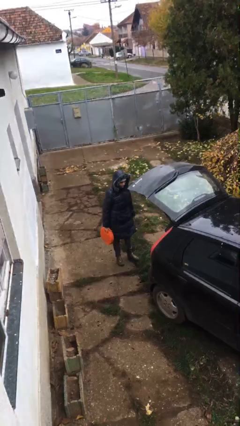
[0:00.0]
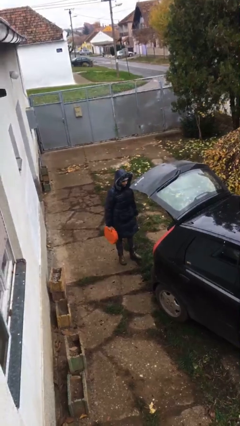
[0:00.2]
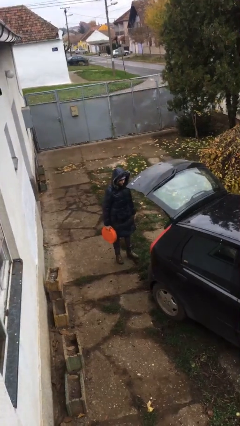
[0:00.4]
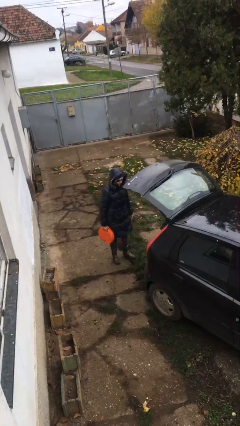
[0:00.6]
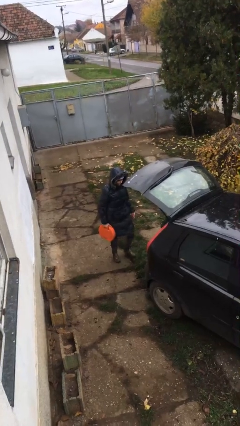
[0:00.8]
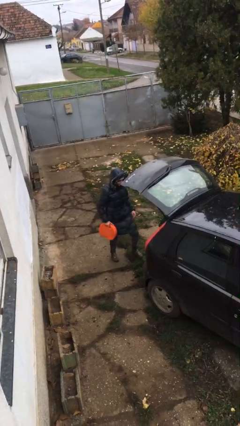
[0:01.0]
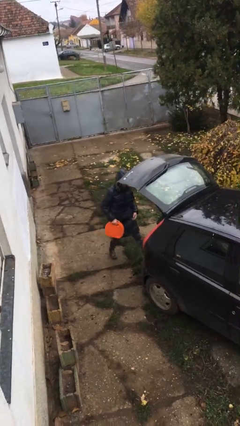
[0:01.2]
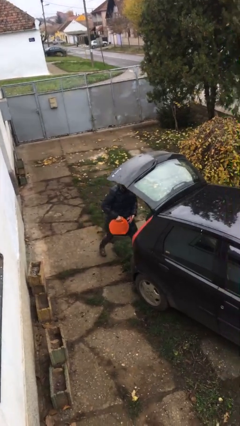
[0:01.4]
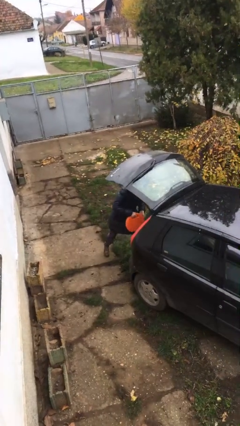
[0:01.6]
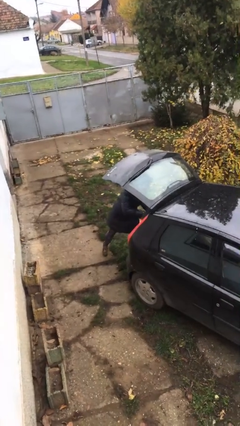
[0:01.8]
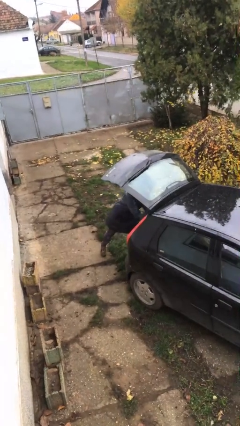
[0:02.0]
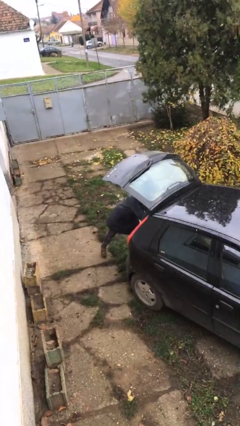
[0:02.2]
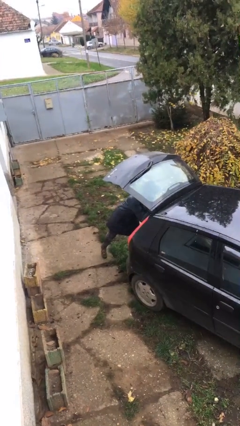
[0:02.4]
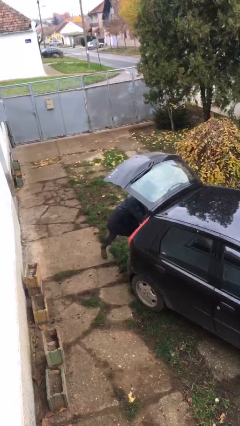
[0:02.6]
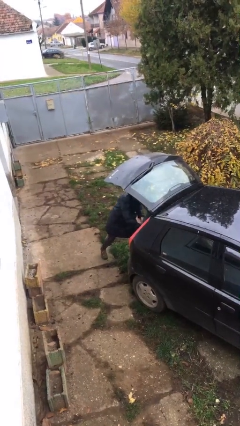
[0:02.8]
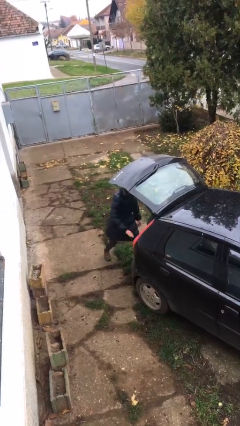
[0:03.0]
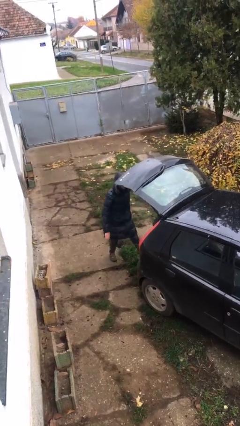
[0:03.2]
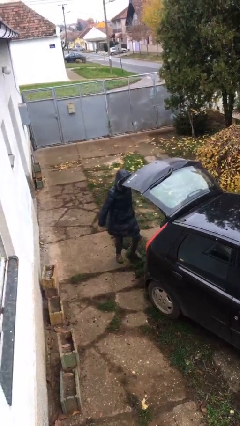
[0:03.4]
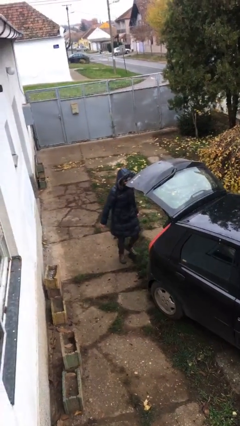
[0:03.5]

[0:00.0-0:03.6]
person loads car

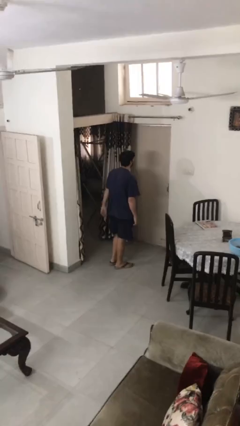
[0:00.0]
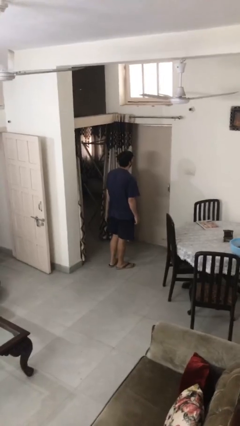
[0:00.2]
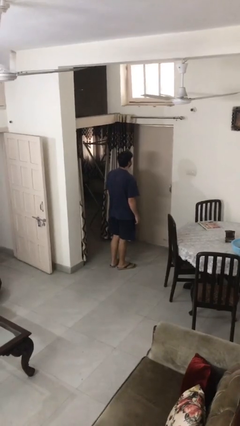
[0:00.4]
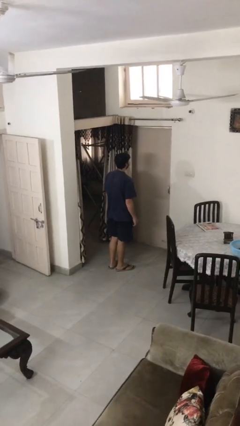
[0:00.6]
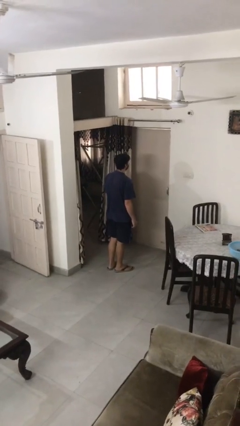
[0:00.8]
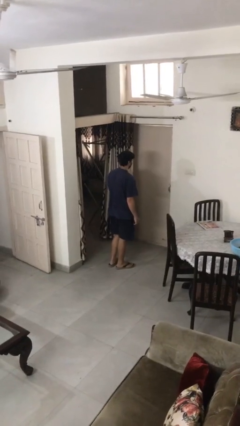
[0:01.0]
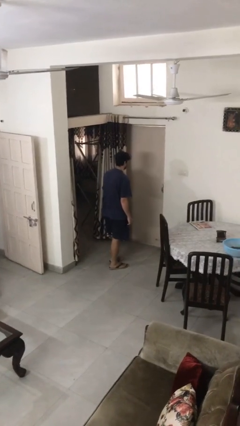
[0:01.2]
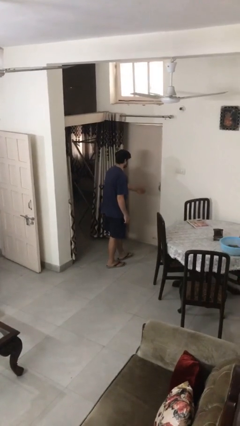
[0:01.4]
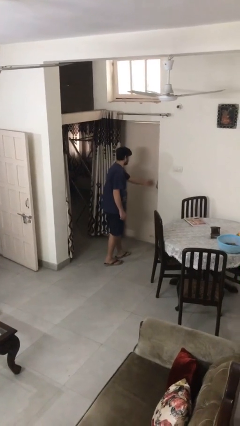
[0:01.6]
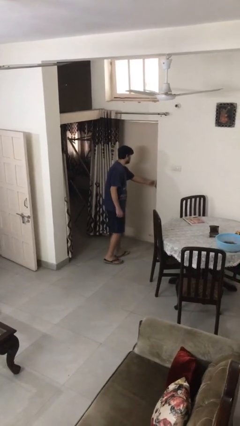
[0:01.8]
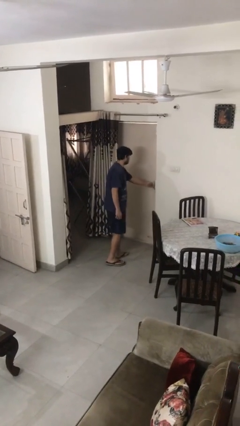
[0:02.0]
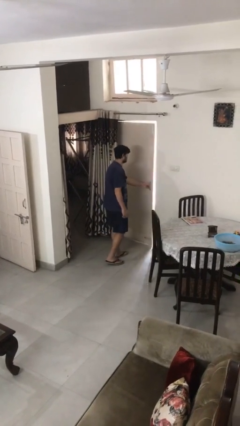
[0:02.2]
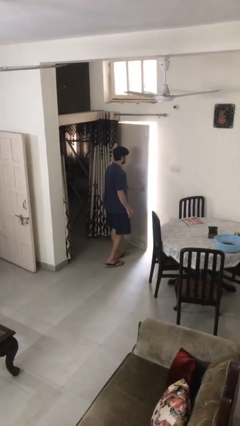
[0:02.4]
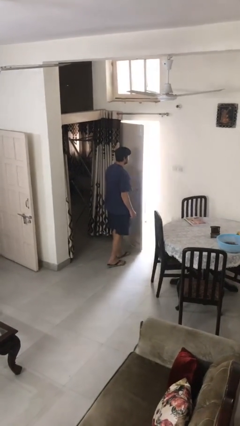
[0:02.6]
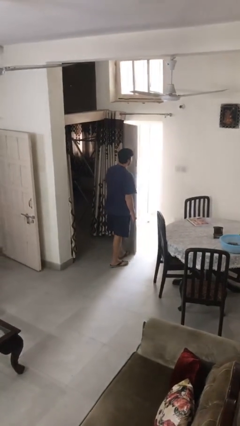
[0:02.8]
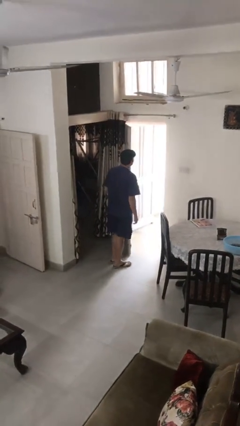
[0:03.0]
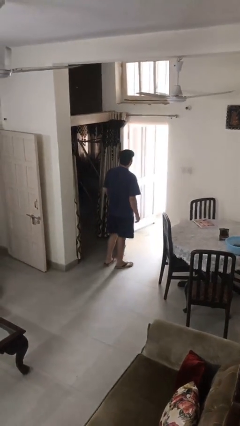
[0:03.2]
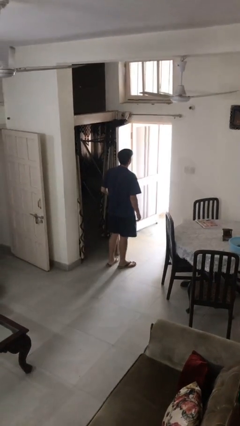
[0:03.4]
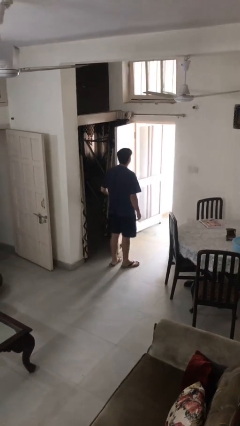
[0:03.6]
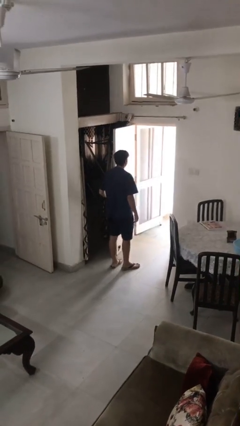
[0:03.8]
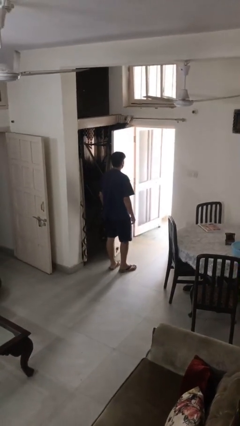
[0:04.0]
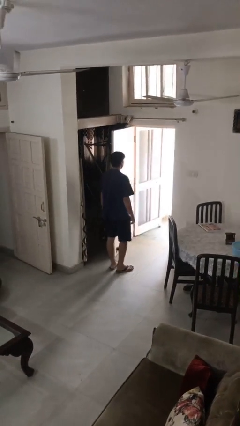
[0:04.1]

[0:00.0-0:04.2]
person opens facility door

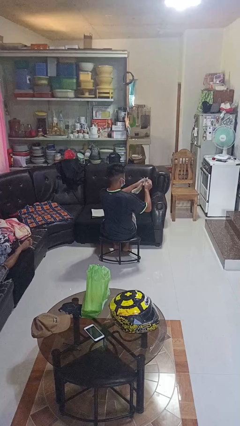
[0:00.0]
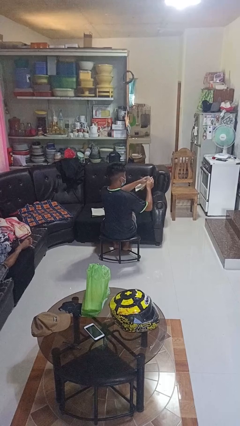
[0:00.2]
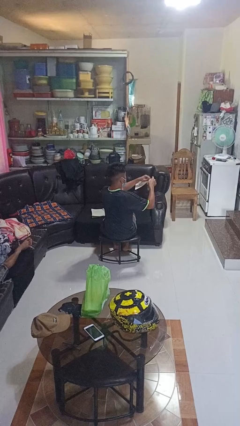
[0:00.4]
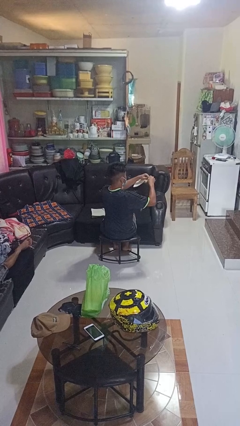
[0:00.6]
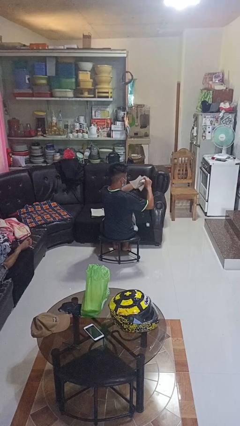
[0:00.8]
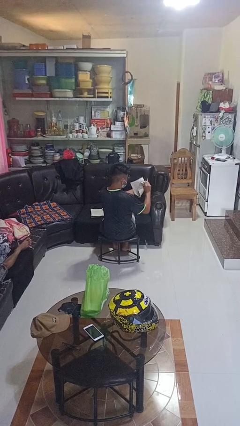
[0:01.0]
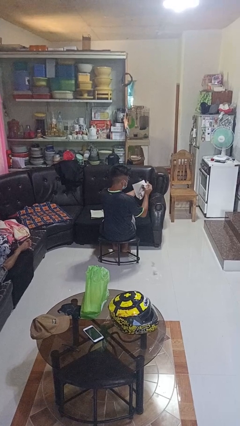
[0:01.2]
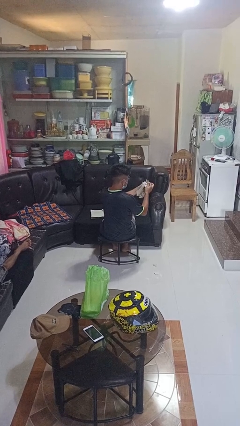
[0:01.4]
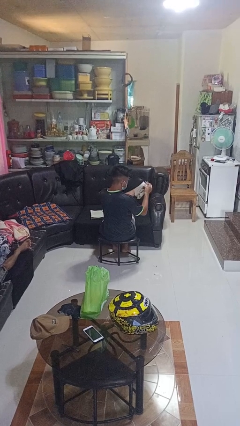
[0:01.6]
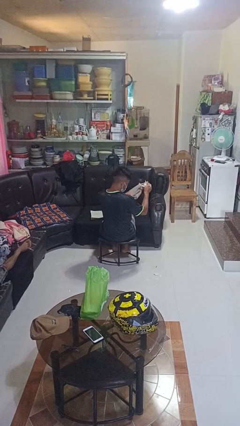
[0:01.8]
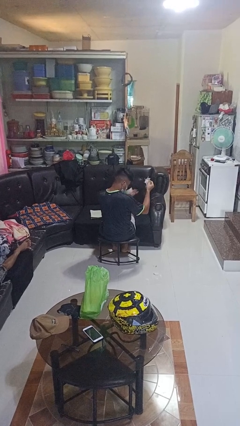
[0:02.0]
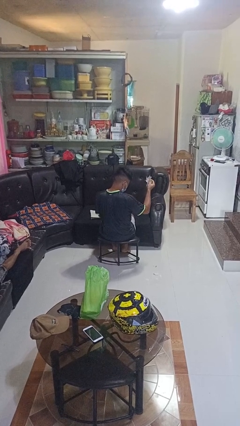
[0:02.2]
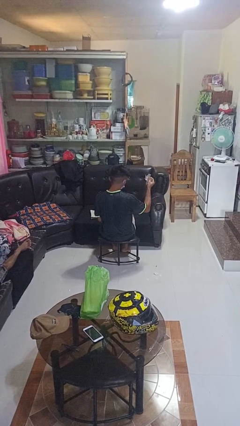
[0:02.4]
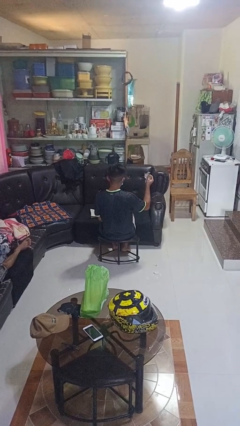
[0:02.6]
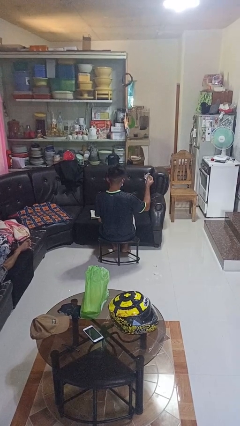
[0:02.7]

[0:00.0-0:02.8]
person tears paper

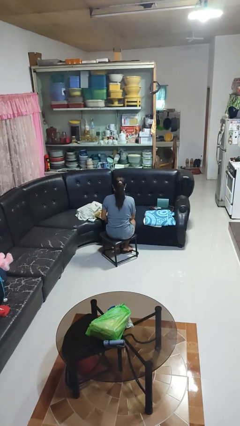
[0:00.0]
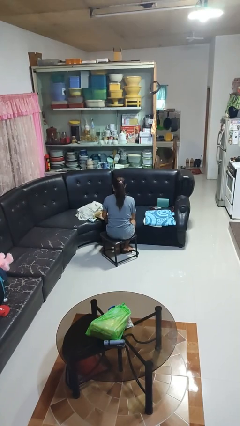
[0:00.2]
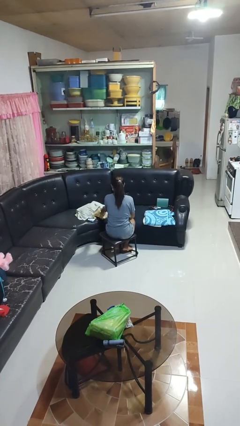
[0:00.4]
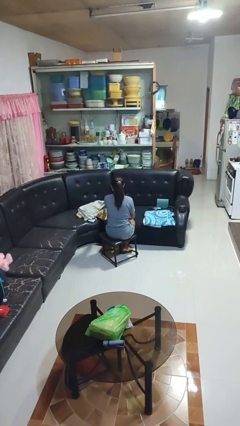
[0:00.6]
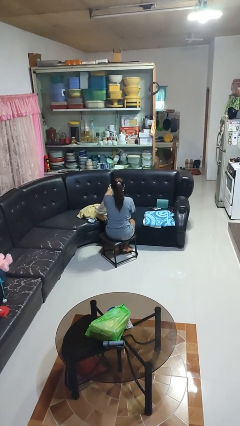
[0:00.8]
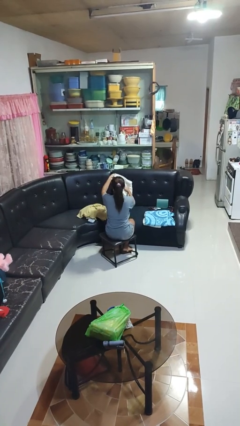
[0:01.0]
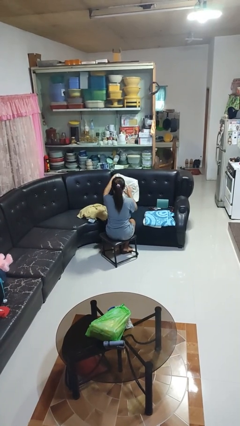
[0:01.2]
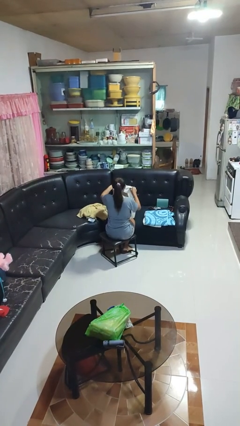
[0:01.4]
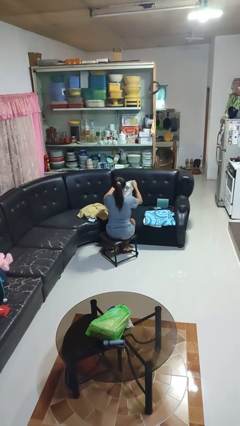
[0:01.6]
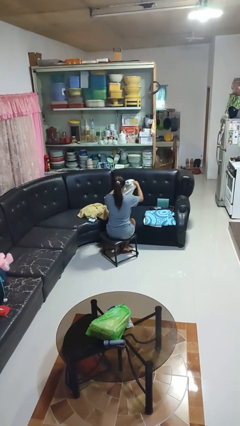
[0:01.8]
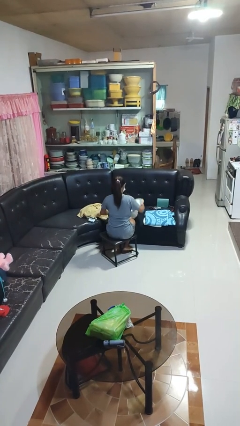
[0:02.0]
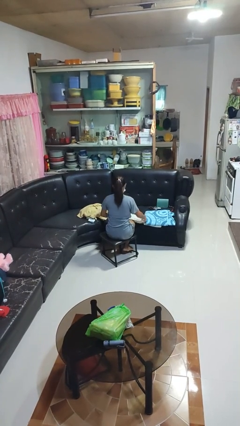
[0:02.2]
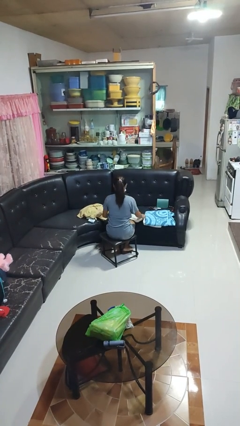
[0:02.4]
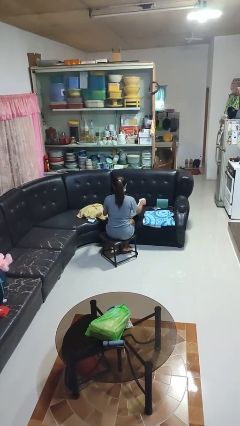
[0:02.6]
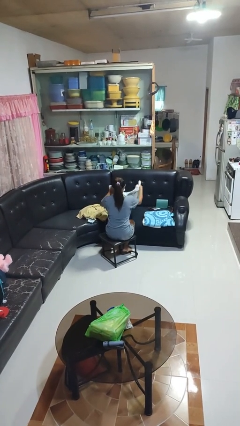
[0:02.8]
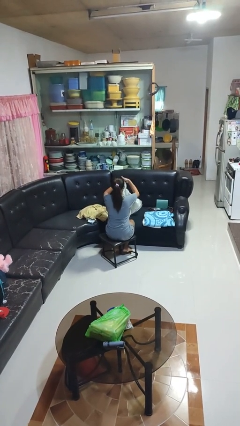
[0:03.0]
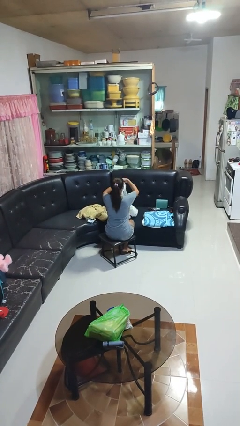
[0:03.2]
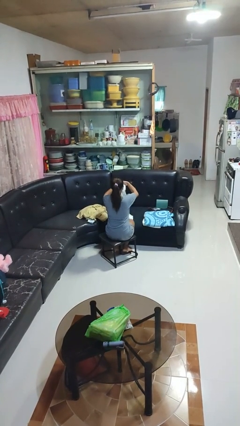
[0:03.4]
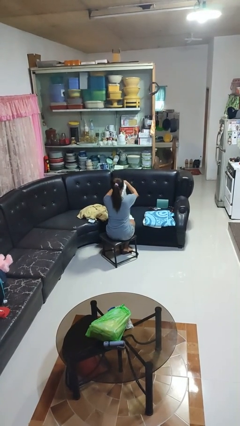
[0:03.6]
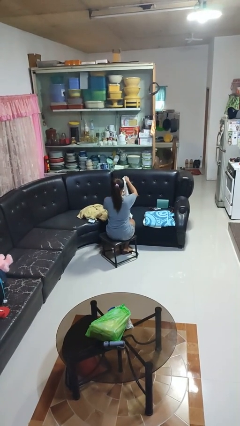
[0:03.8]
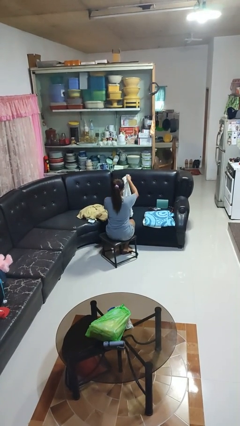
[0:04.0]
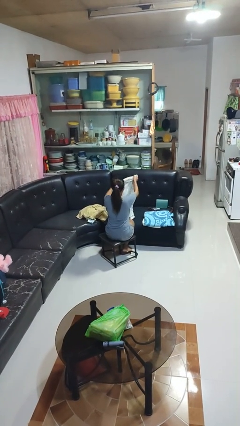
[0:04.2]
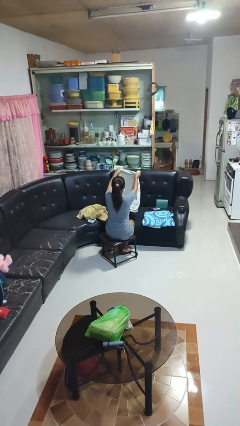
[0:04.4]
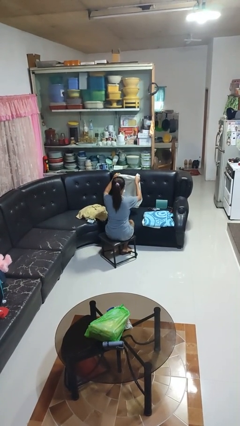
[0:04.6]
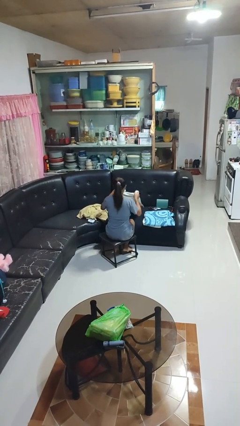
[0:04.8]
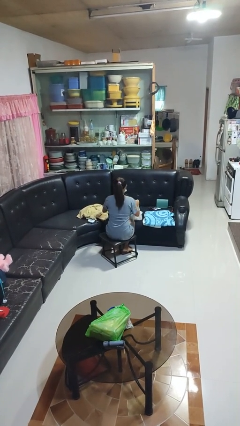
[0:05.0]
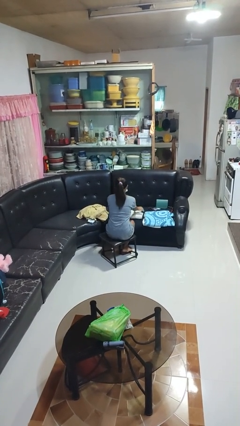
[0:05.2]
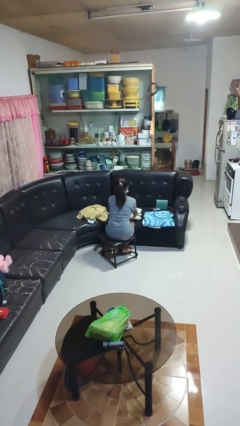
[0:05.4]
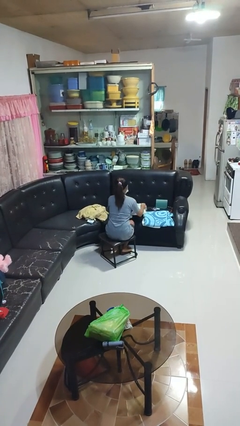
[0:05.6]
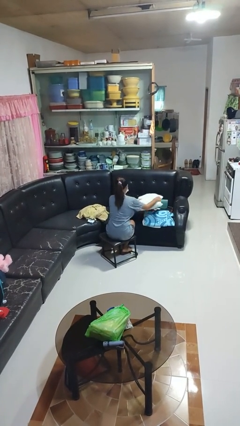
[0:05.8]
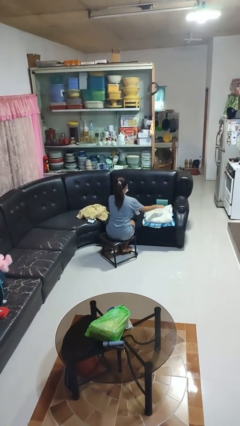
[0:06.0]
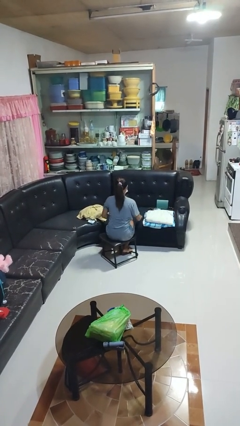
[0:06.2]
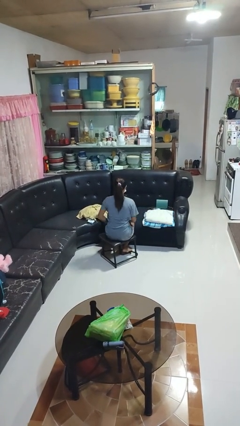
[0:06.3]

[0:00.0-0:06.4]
person folds towel
